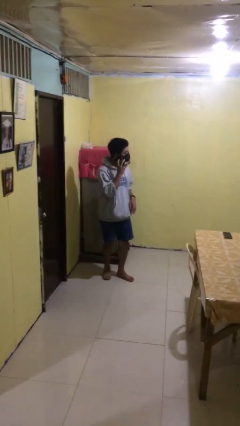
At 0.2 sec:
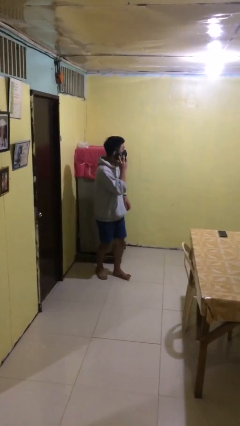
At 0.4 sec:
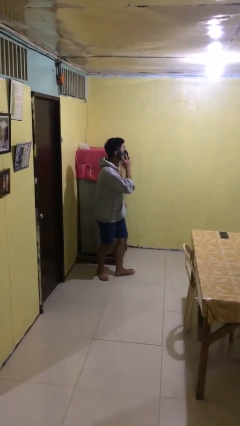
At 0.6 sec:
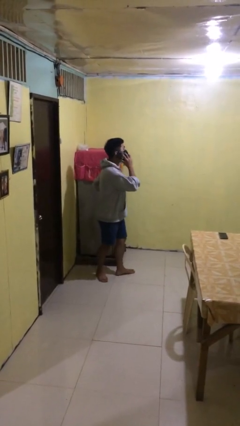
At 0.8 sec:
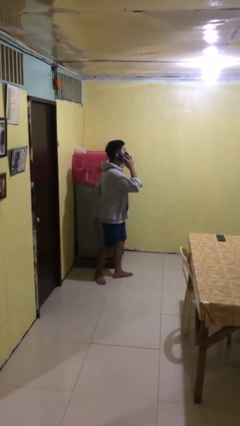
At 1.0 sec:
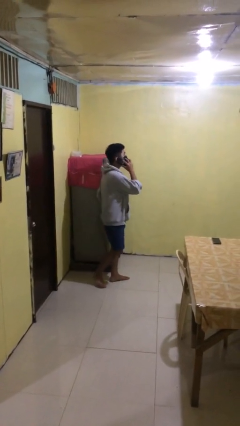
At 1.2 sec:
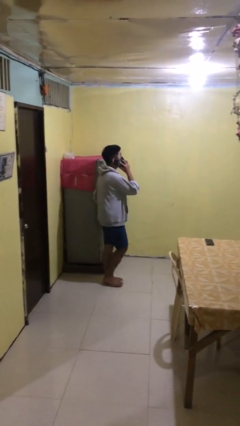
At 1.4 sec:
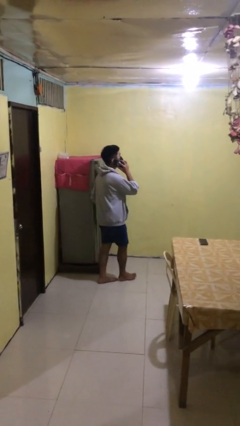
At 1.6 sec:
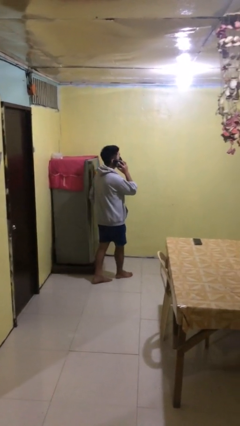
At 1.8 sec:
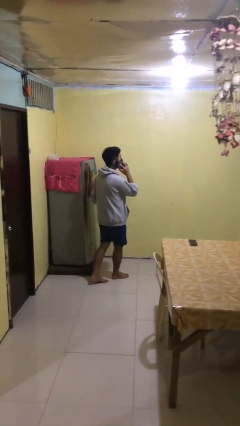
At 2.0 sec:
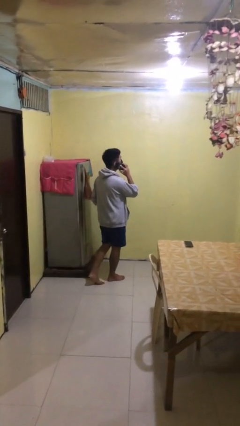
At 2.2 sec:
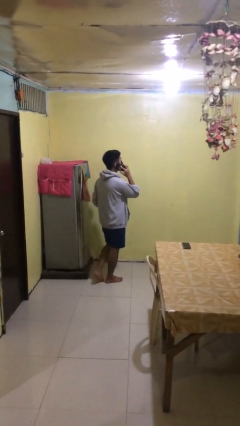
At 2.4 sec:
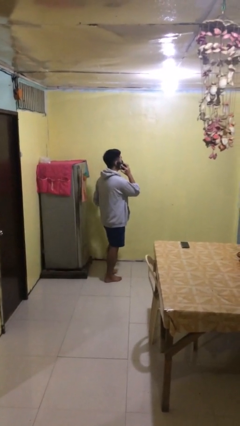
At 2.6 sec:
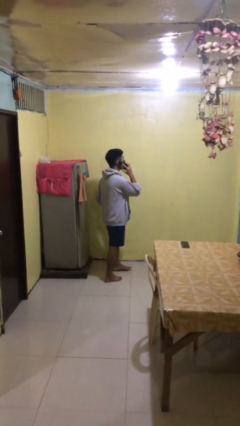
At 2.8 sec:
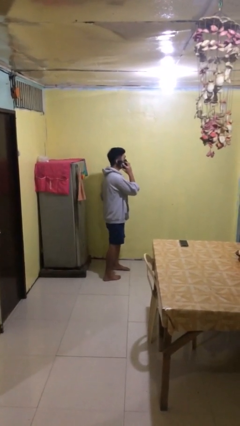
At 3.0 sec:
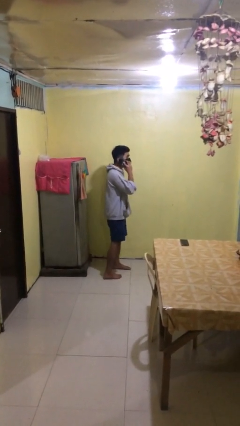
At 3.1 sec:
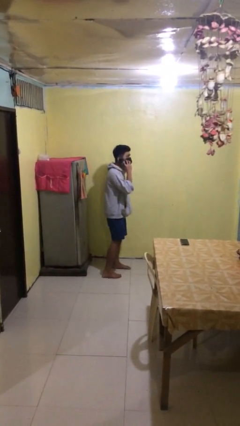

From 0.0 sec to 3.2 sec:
person talks on phone

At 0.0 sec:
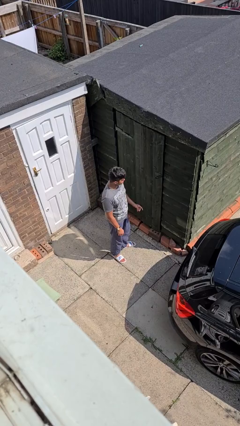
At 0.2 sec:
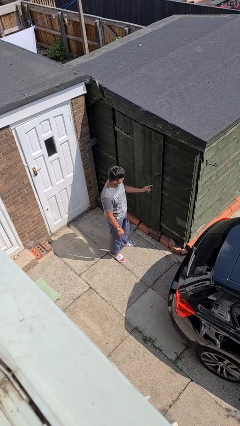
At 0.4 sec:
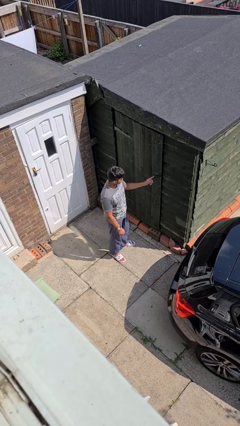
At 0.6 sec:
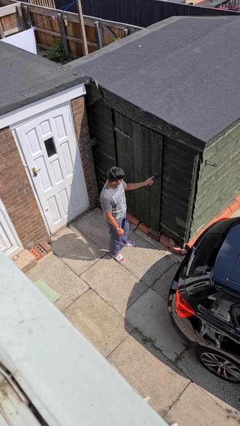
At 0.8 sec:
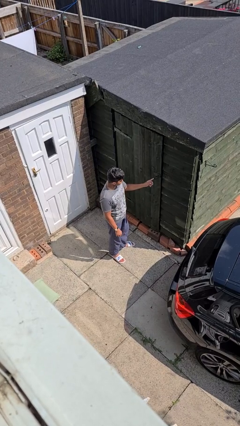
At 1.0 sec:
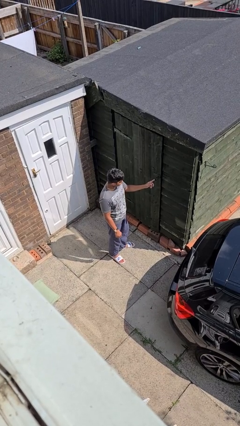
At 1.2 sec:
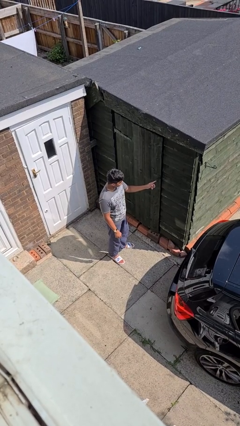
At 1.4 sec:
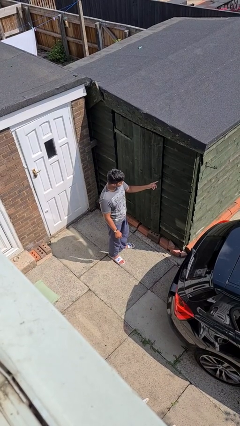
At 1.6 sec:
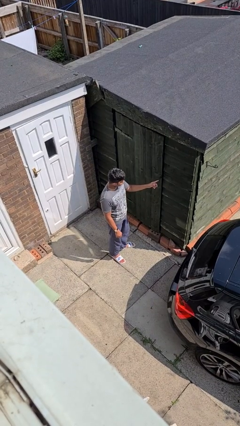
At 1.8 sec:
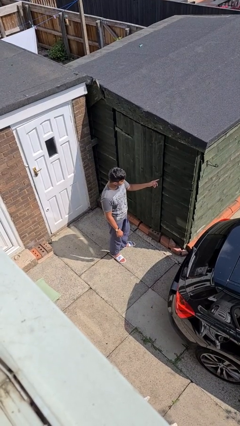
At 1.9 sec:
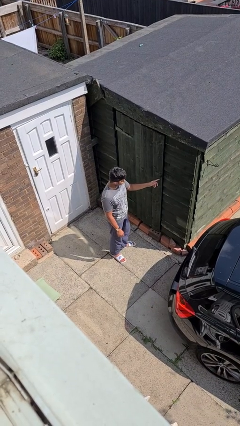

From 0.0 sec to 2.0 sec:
person taps object with finger

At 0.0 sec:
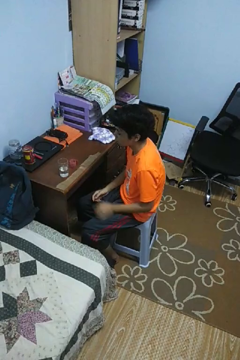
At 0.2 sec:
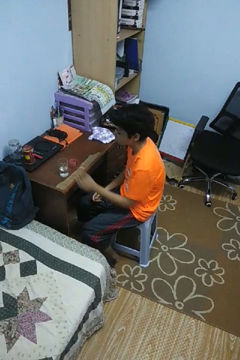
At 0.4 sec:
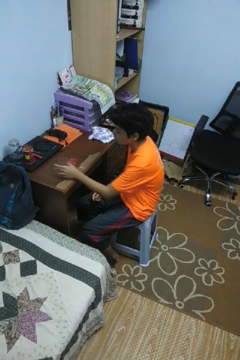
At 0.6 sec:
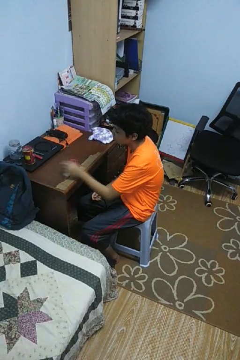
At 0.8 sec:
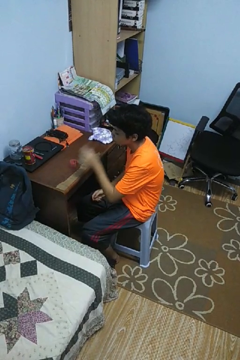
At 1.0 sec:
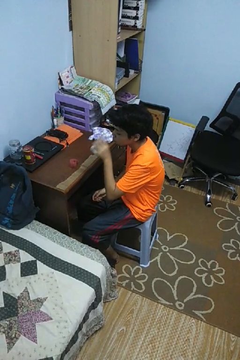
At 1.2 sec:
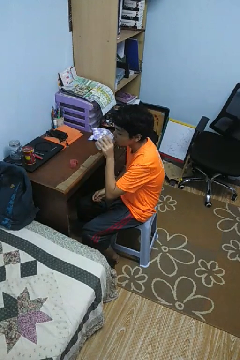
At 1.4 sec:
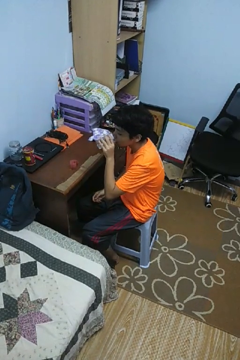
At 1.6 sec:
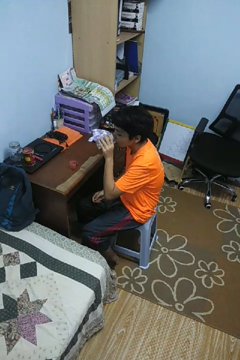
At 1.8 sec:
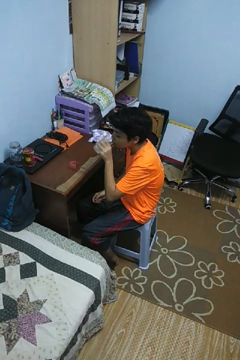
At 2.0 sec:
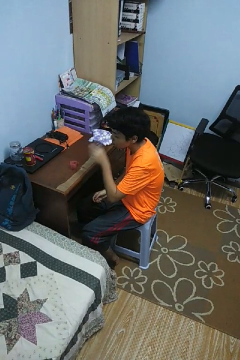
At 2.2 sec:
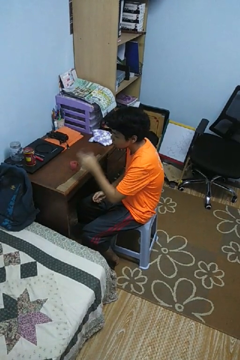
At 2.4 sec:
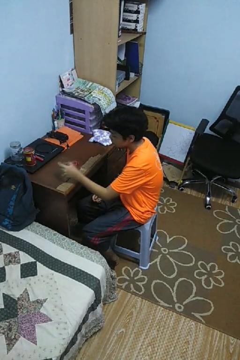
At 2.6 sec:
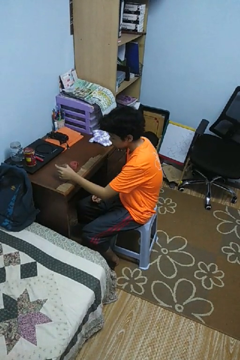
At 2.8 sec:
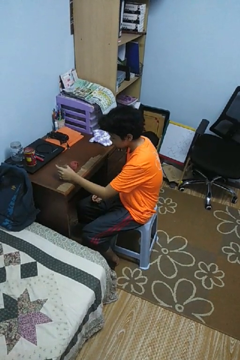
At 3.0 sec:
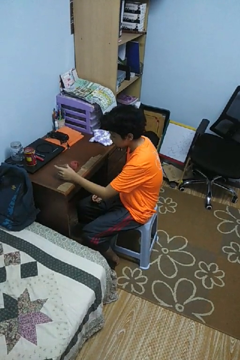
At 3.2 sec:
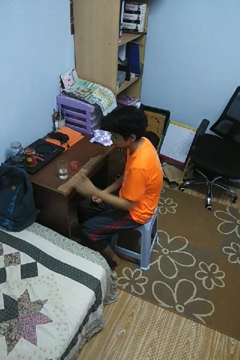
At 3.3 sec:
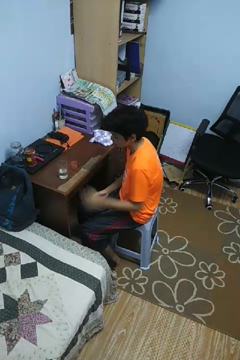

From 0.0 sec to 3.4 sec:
person drinks from cup

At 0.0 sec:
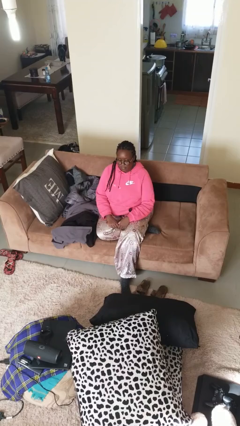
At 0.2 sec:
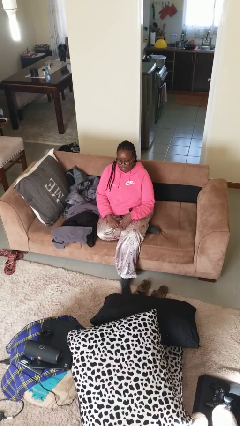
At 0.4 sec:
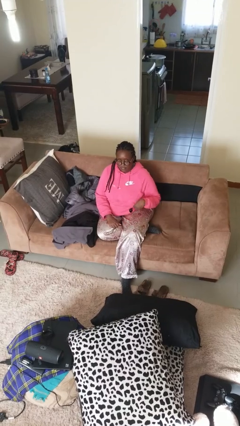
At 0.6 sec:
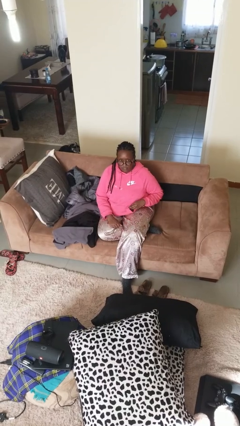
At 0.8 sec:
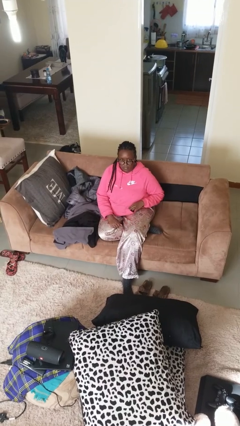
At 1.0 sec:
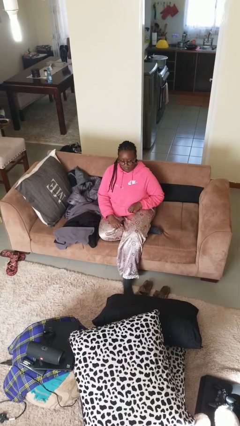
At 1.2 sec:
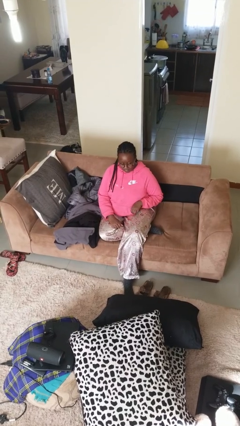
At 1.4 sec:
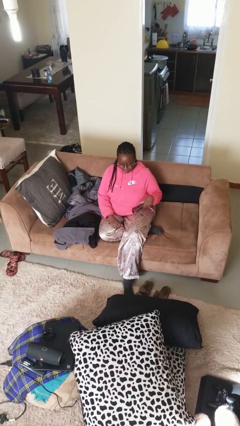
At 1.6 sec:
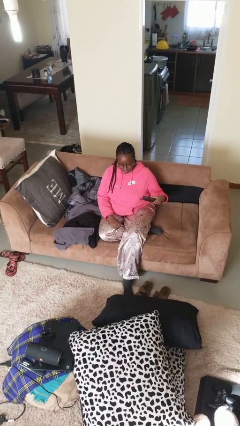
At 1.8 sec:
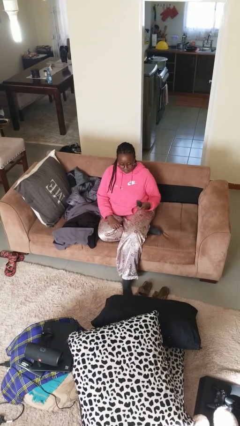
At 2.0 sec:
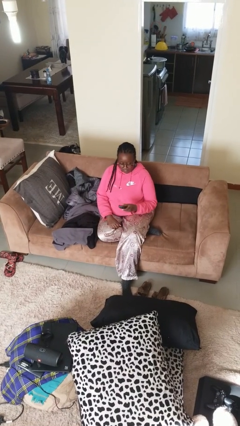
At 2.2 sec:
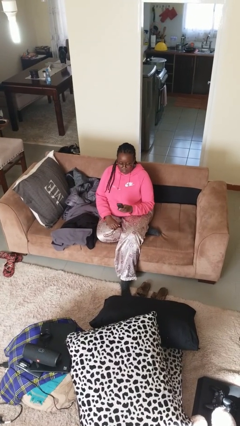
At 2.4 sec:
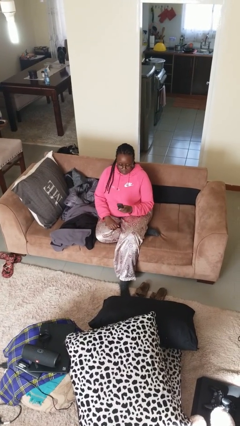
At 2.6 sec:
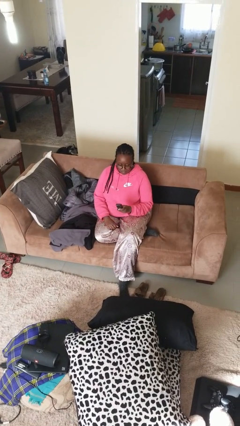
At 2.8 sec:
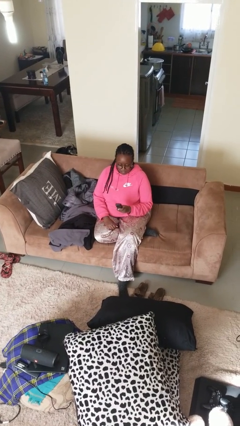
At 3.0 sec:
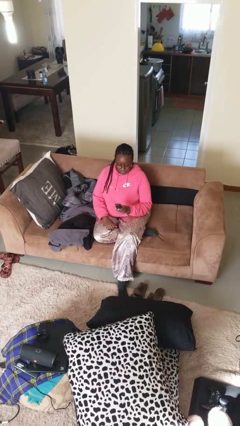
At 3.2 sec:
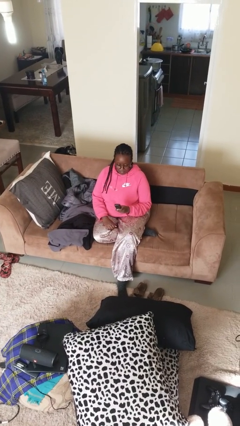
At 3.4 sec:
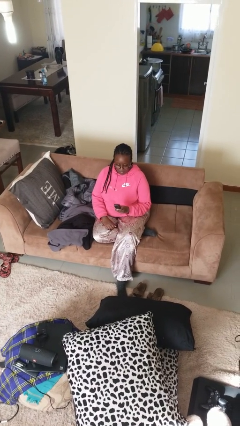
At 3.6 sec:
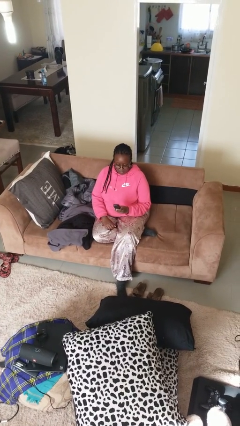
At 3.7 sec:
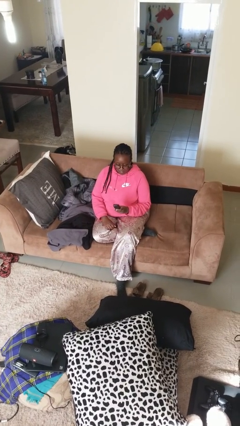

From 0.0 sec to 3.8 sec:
person takes phone from pocket

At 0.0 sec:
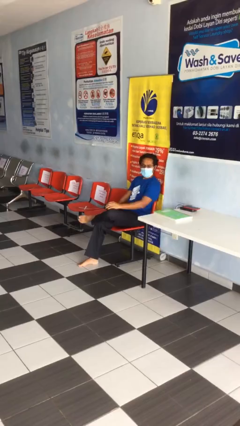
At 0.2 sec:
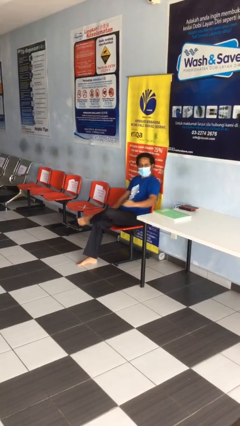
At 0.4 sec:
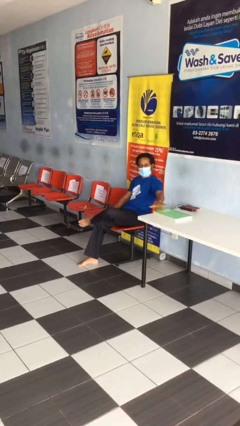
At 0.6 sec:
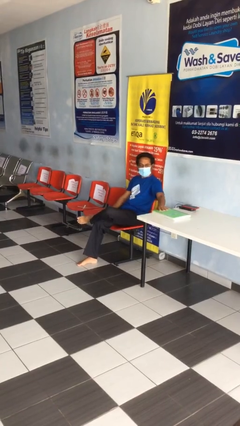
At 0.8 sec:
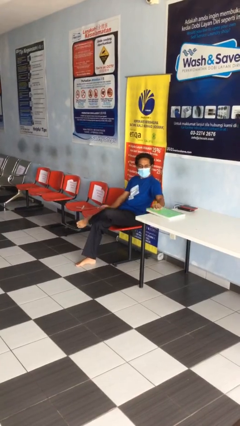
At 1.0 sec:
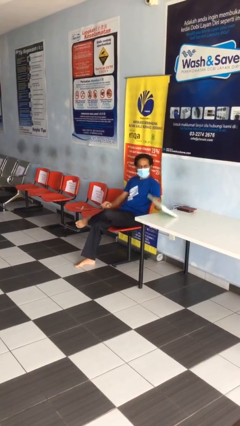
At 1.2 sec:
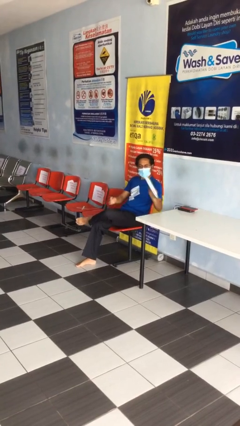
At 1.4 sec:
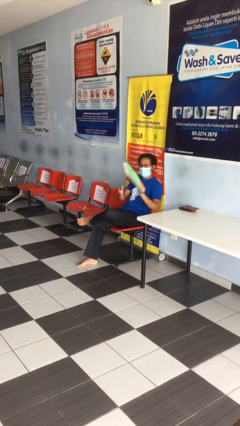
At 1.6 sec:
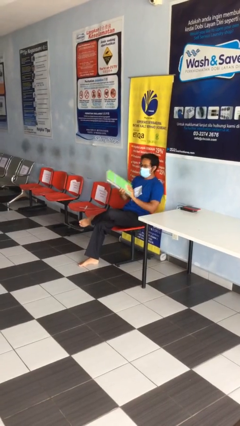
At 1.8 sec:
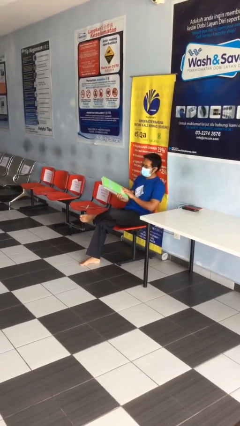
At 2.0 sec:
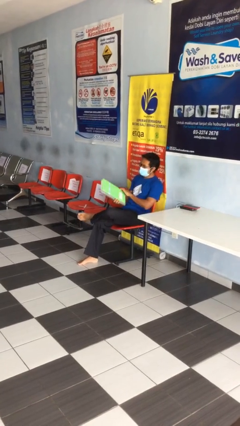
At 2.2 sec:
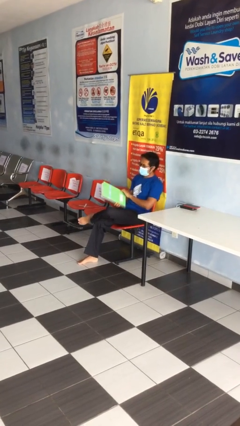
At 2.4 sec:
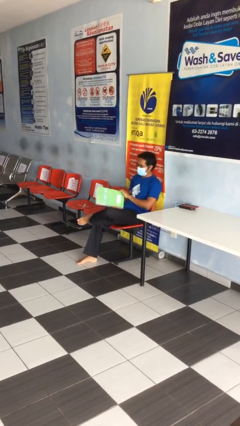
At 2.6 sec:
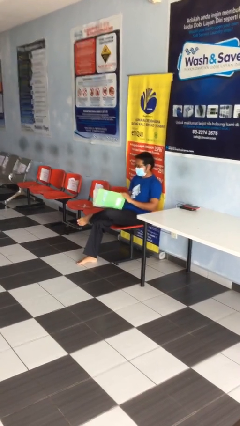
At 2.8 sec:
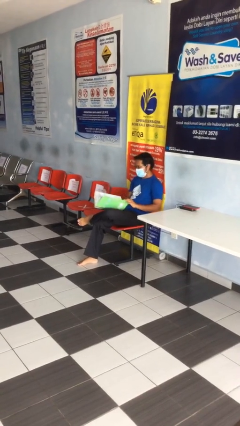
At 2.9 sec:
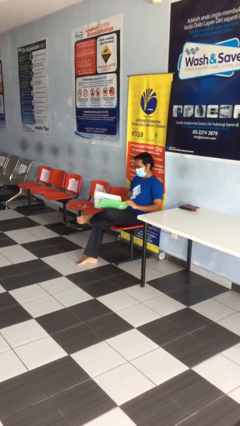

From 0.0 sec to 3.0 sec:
person picks up object from table

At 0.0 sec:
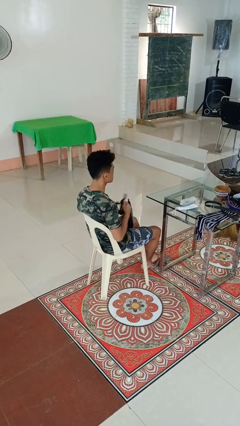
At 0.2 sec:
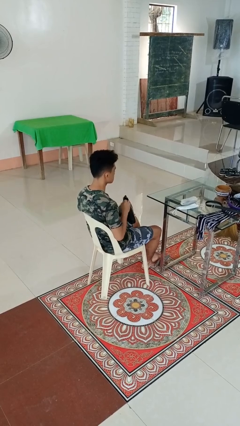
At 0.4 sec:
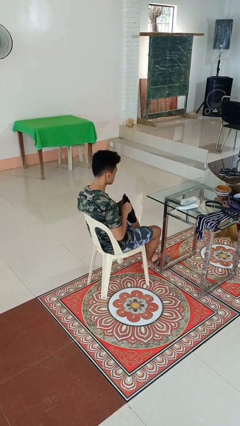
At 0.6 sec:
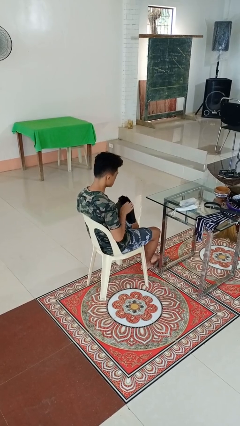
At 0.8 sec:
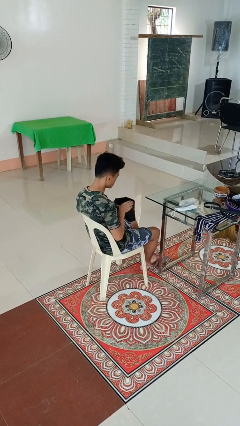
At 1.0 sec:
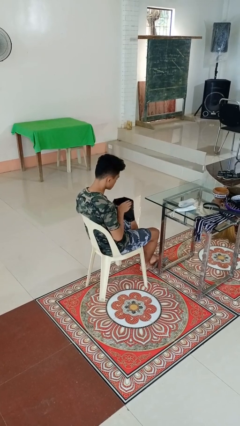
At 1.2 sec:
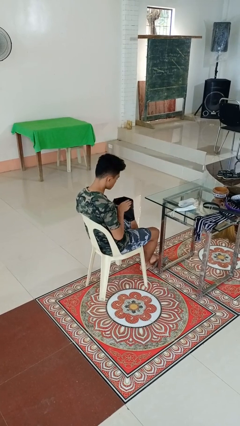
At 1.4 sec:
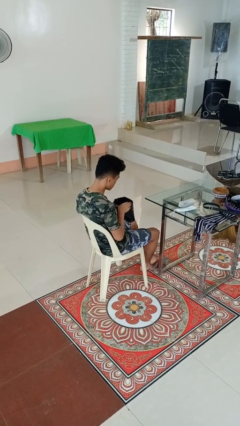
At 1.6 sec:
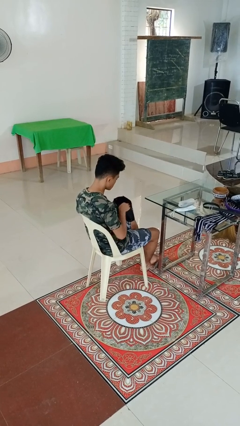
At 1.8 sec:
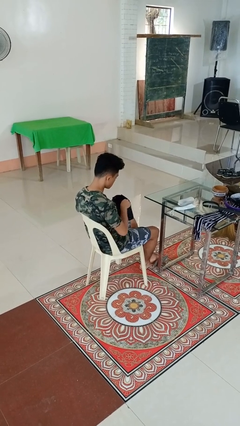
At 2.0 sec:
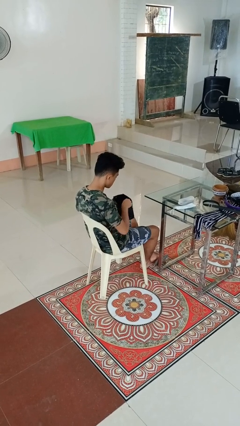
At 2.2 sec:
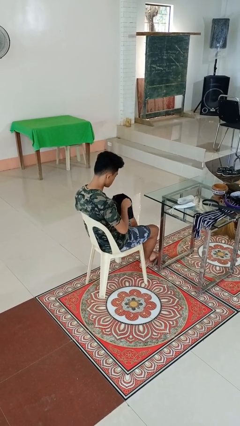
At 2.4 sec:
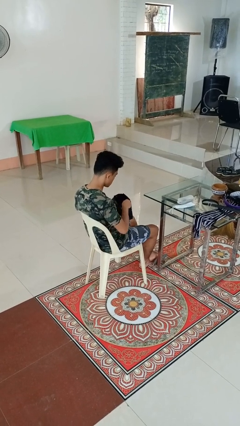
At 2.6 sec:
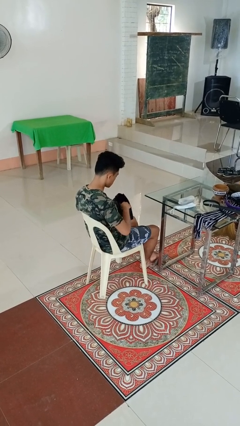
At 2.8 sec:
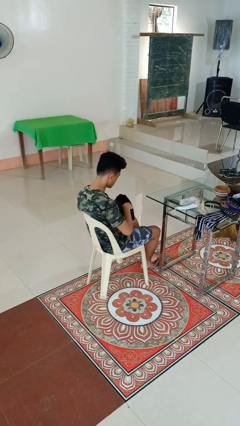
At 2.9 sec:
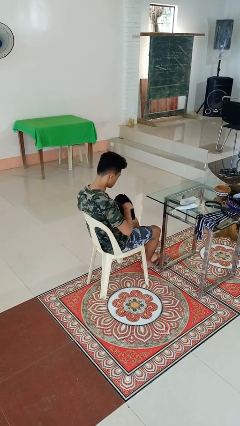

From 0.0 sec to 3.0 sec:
person searches in purse
